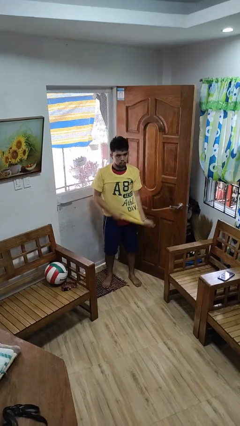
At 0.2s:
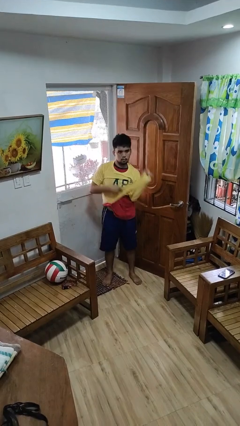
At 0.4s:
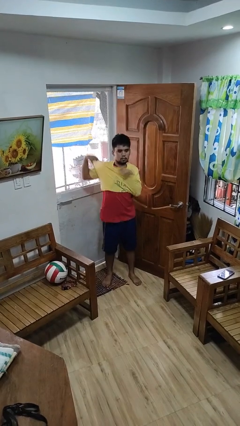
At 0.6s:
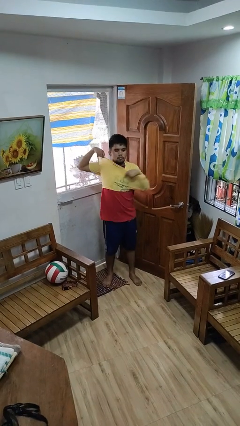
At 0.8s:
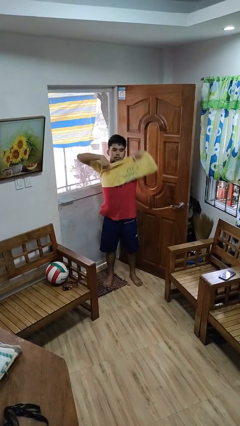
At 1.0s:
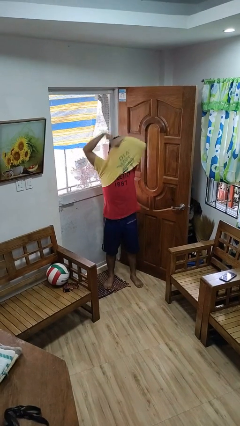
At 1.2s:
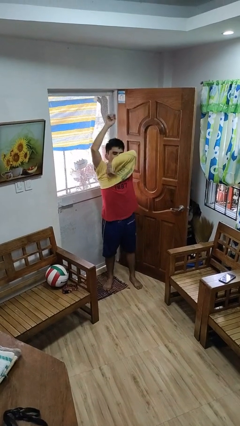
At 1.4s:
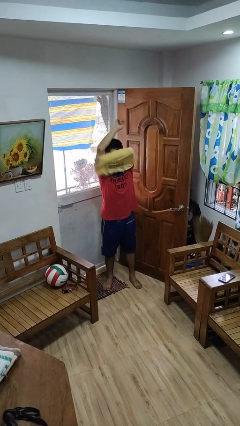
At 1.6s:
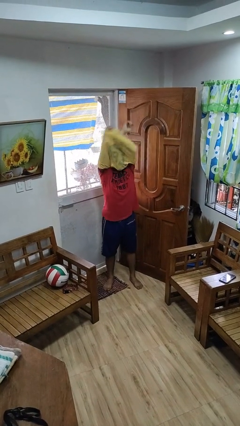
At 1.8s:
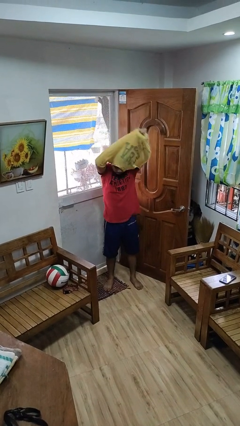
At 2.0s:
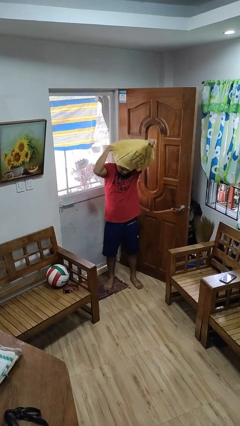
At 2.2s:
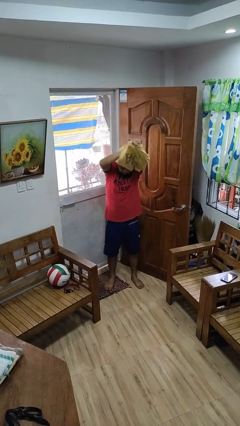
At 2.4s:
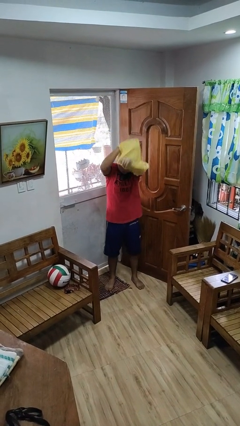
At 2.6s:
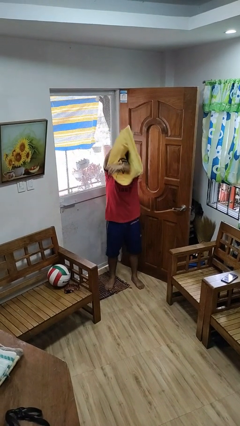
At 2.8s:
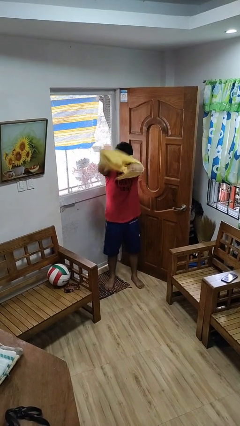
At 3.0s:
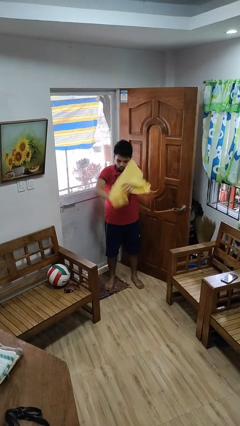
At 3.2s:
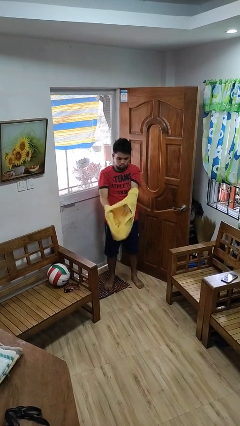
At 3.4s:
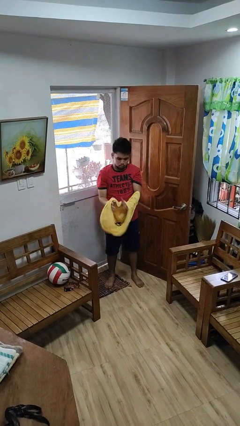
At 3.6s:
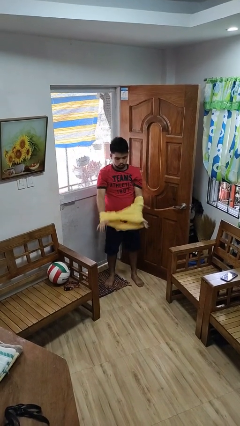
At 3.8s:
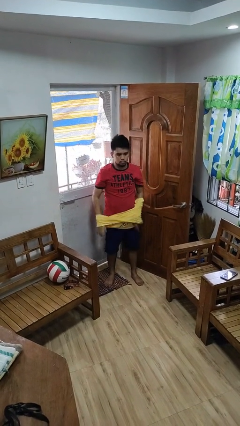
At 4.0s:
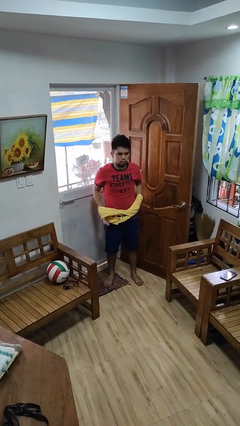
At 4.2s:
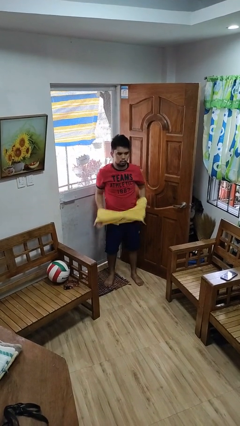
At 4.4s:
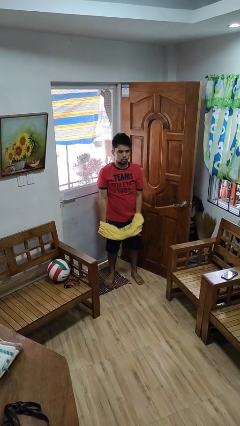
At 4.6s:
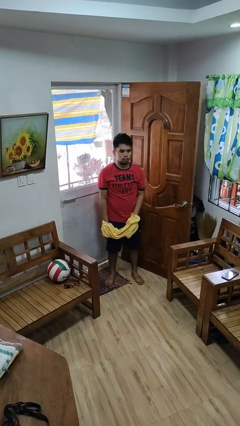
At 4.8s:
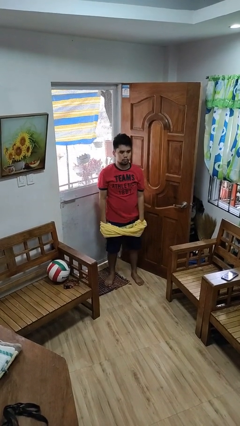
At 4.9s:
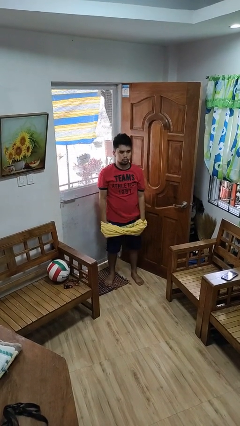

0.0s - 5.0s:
person takes off shirt

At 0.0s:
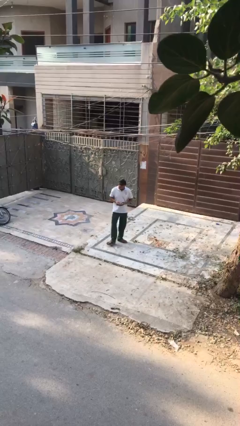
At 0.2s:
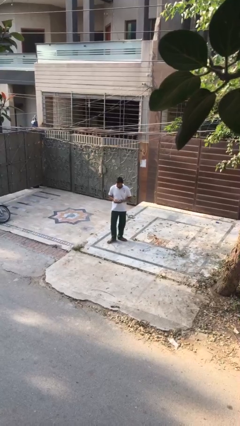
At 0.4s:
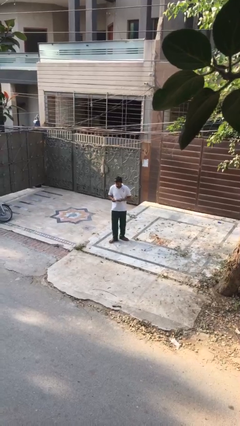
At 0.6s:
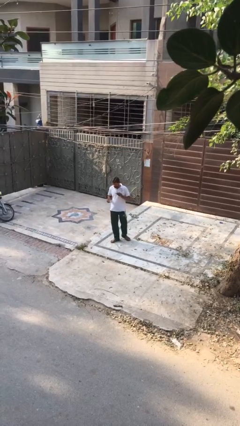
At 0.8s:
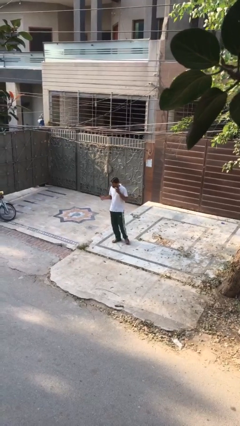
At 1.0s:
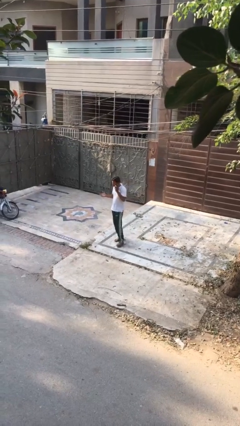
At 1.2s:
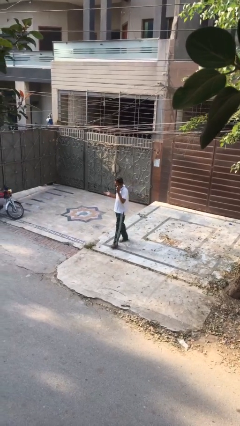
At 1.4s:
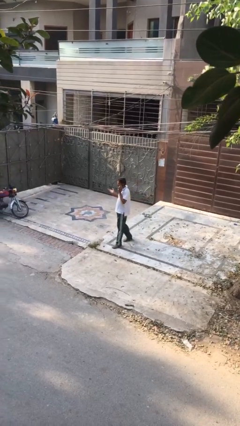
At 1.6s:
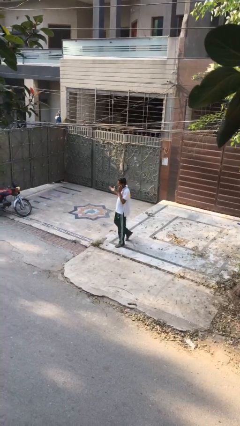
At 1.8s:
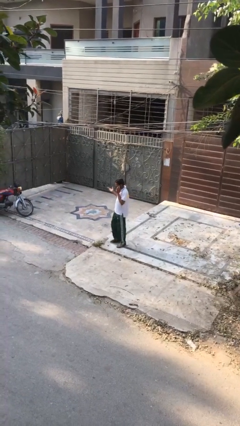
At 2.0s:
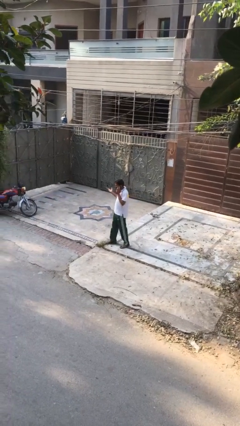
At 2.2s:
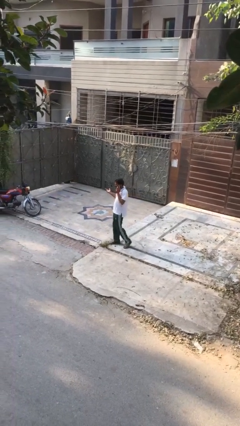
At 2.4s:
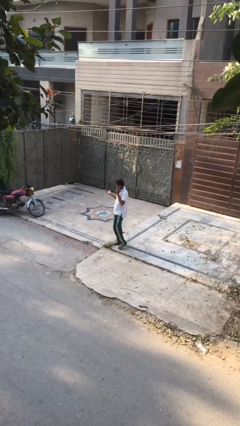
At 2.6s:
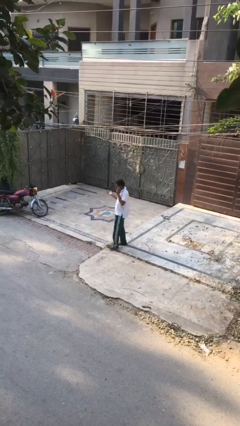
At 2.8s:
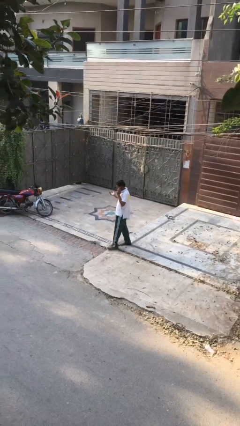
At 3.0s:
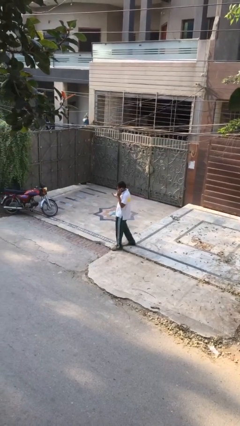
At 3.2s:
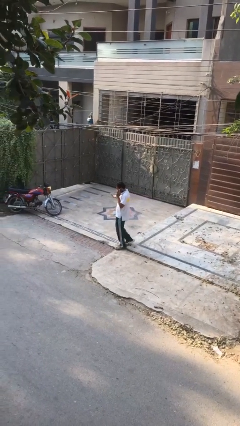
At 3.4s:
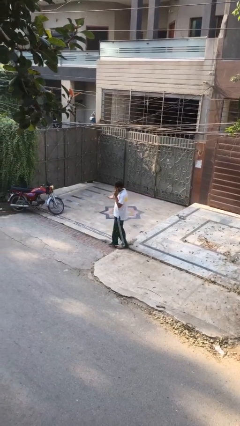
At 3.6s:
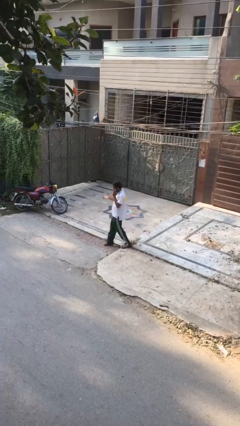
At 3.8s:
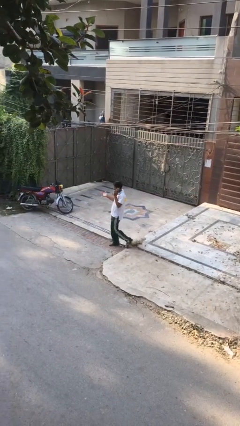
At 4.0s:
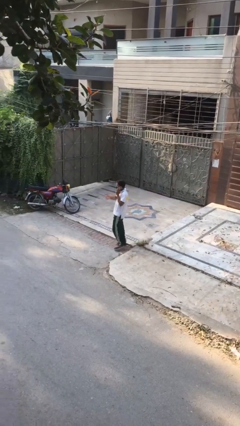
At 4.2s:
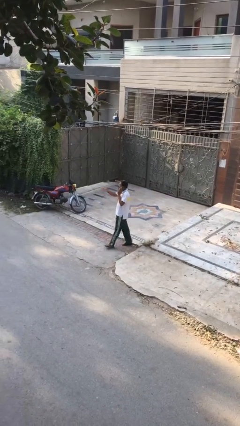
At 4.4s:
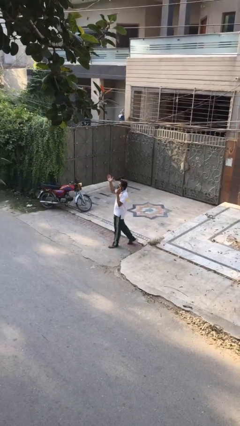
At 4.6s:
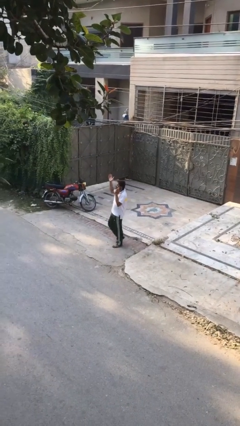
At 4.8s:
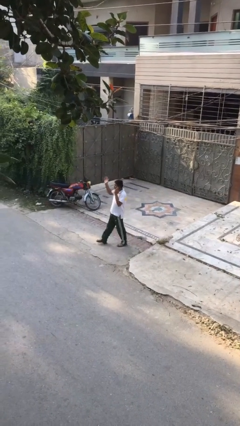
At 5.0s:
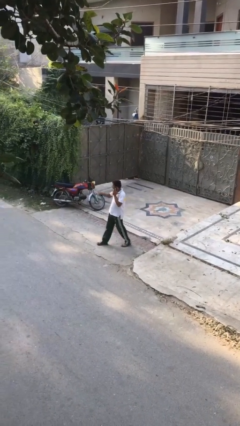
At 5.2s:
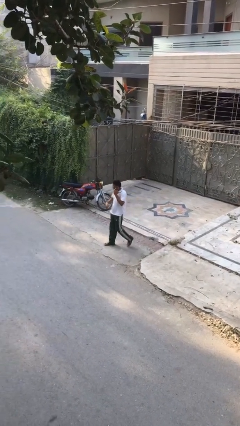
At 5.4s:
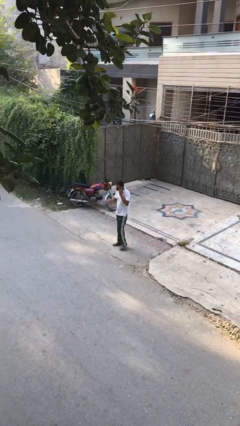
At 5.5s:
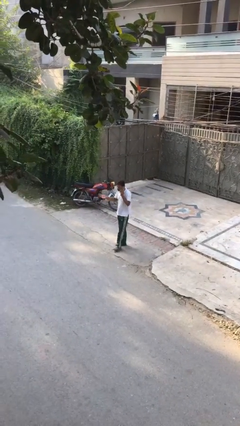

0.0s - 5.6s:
person talks on phone

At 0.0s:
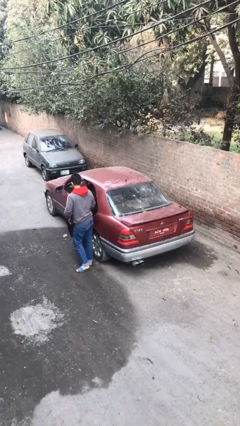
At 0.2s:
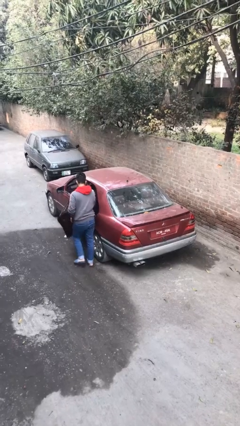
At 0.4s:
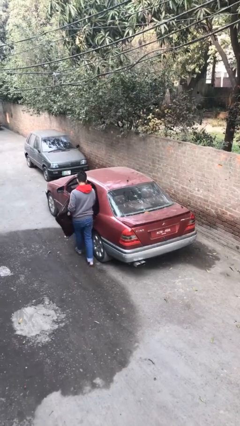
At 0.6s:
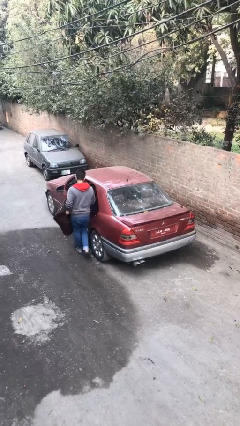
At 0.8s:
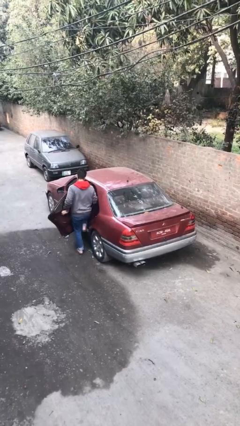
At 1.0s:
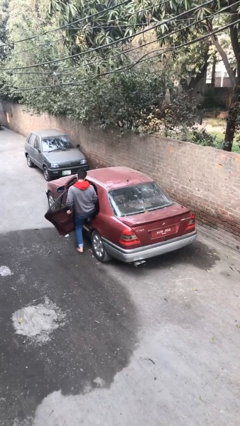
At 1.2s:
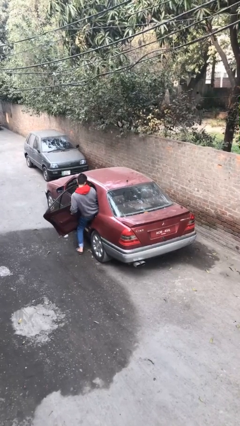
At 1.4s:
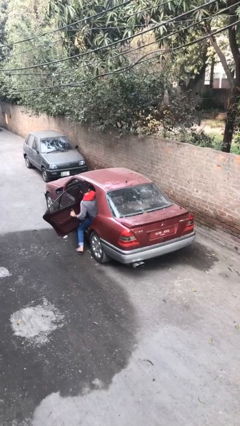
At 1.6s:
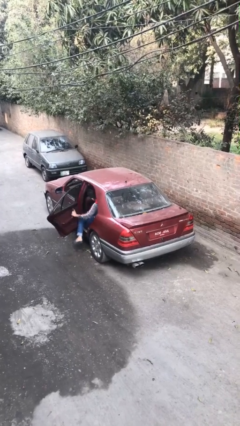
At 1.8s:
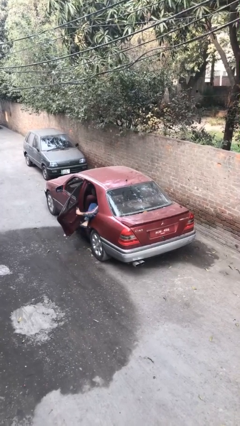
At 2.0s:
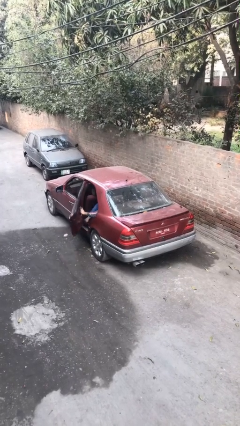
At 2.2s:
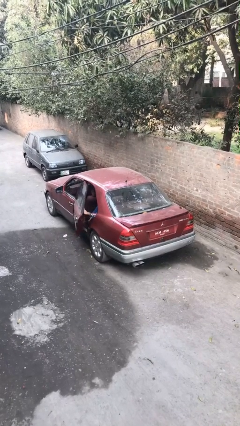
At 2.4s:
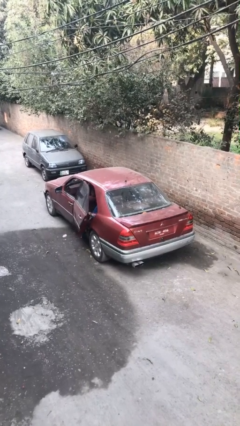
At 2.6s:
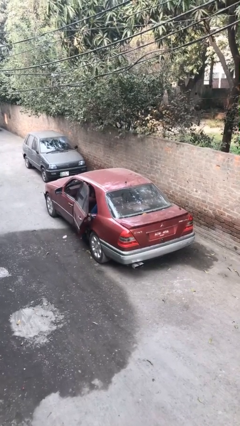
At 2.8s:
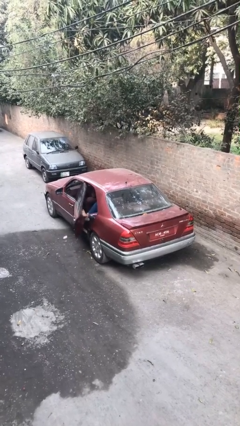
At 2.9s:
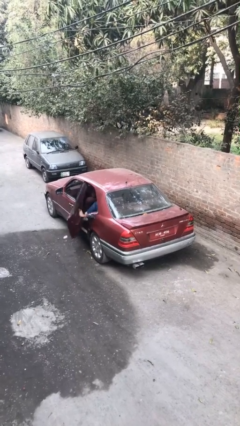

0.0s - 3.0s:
car picks up person

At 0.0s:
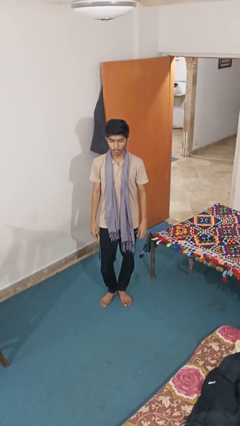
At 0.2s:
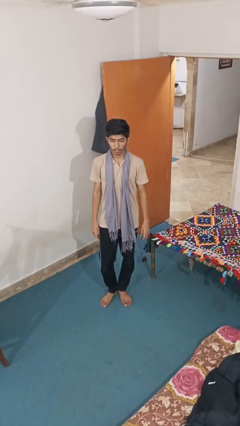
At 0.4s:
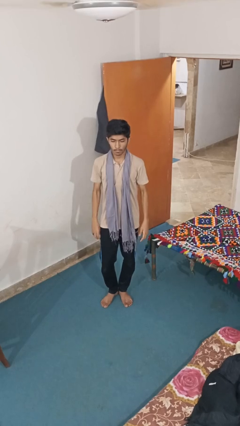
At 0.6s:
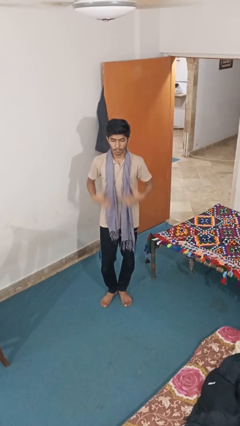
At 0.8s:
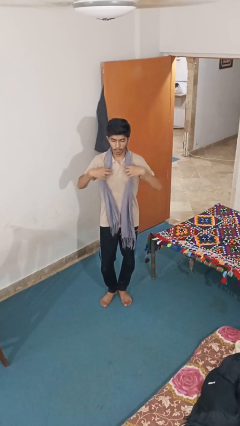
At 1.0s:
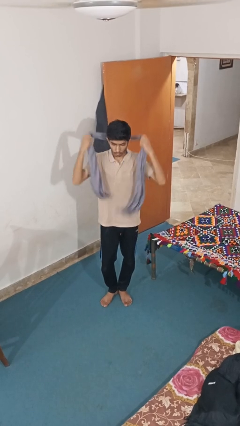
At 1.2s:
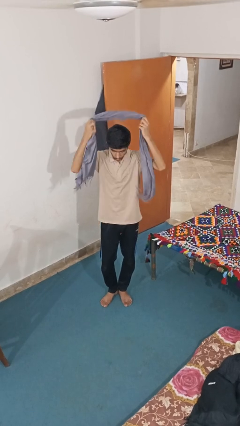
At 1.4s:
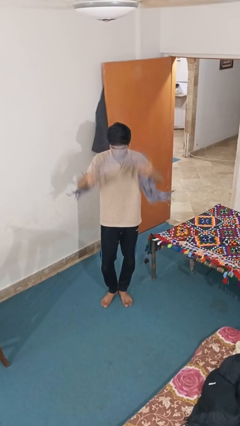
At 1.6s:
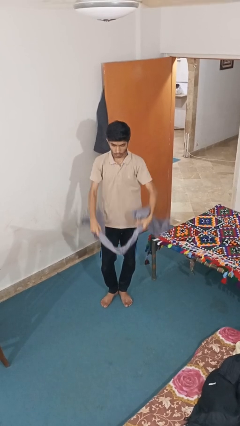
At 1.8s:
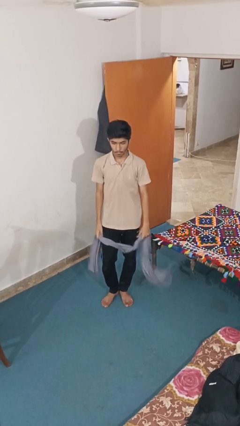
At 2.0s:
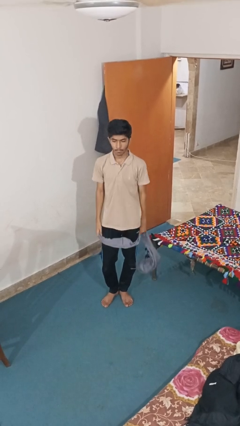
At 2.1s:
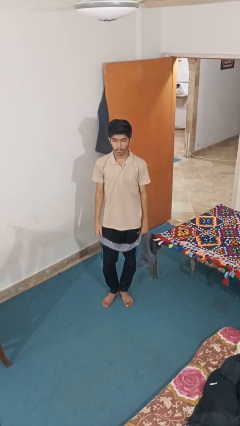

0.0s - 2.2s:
person takes off scarf

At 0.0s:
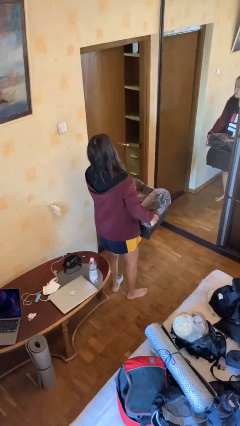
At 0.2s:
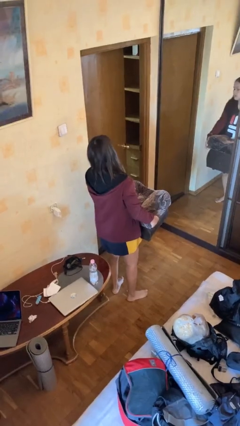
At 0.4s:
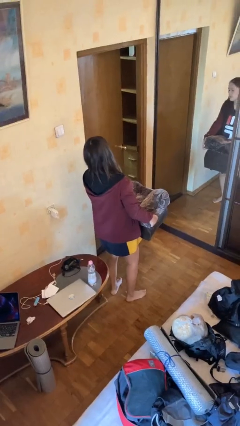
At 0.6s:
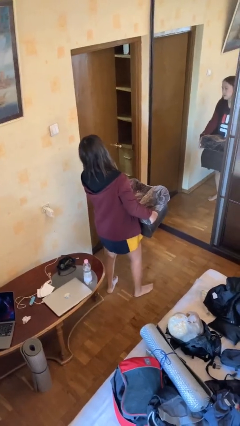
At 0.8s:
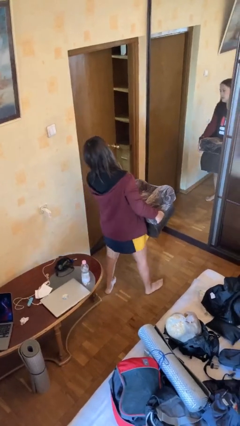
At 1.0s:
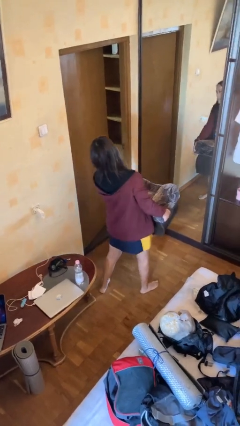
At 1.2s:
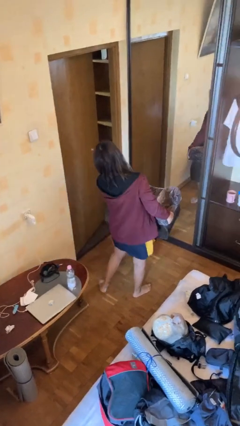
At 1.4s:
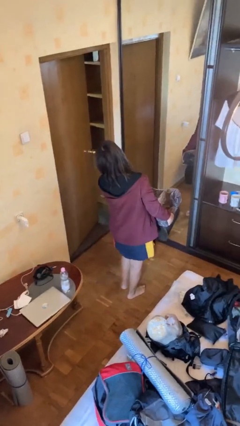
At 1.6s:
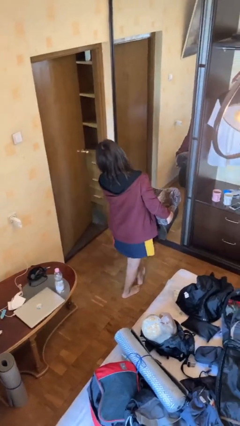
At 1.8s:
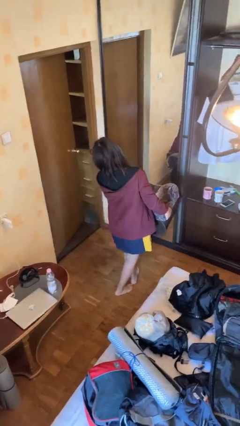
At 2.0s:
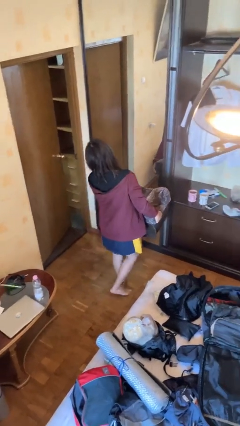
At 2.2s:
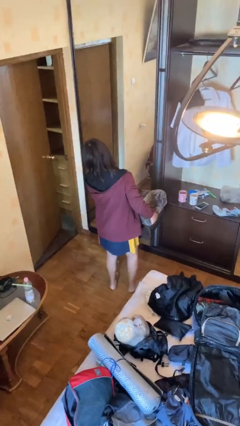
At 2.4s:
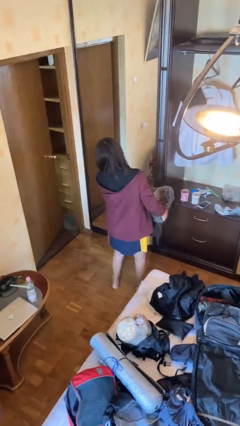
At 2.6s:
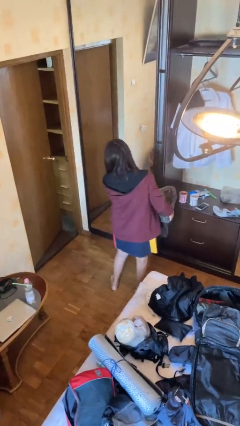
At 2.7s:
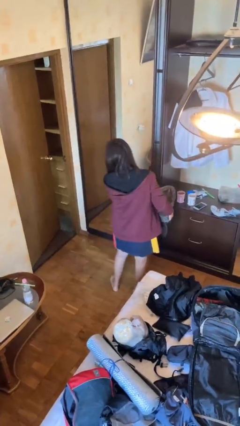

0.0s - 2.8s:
person carries furniture
